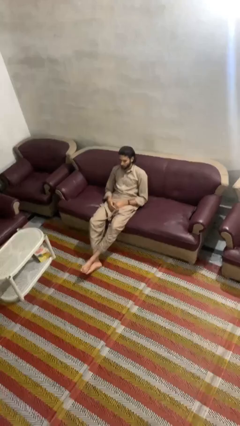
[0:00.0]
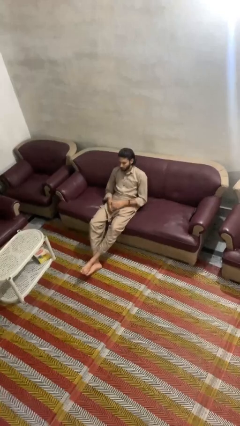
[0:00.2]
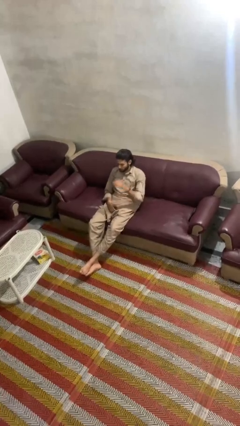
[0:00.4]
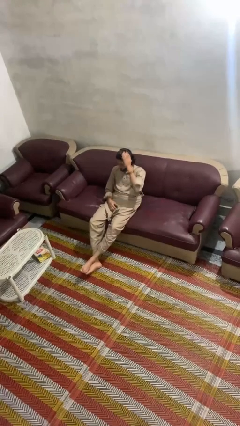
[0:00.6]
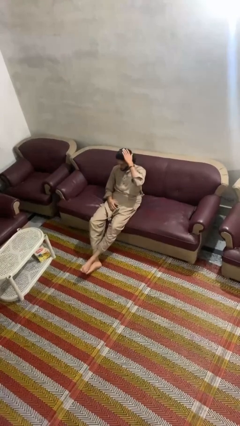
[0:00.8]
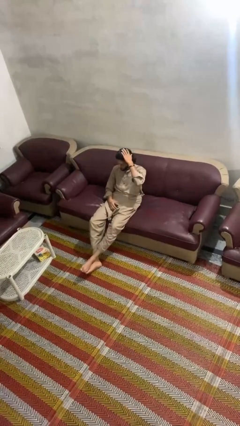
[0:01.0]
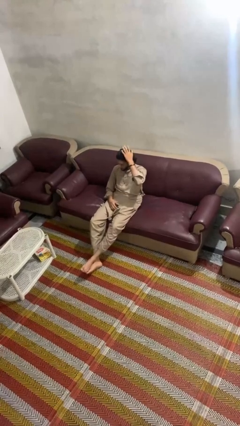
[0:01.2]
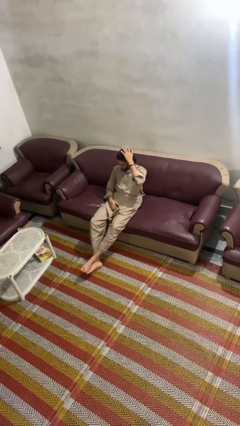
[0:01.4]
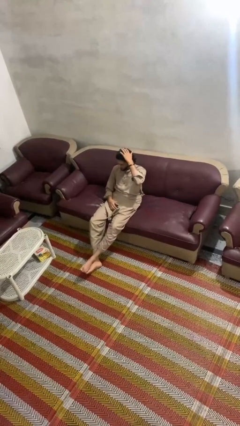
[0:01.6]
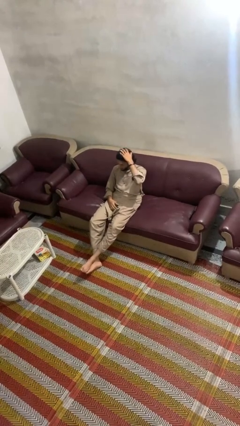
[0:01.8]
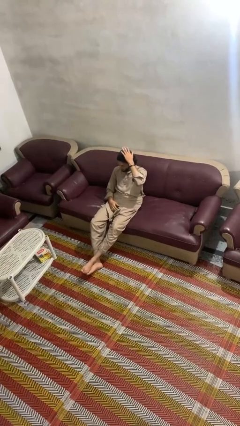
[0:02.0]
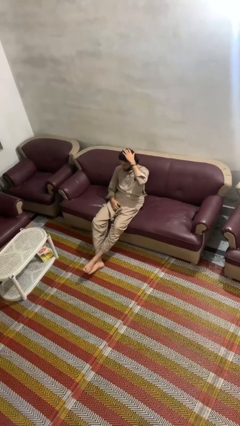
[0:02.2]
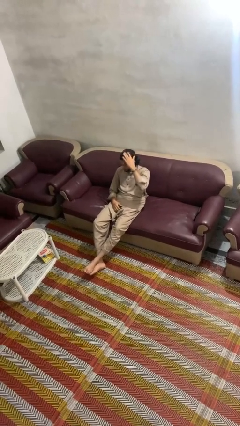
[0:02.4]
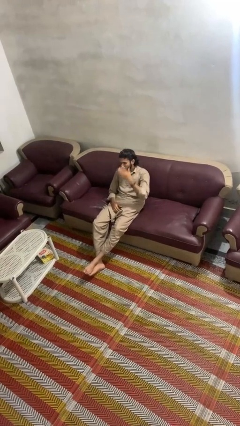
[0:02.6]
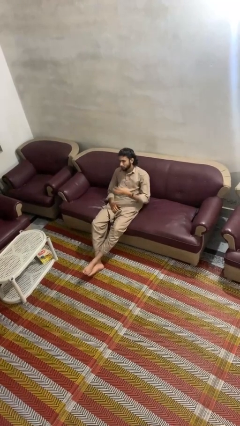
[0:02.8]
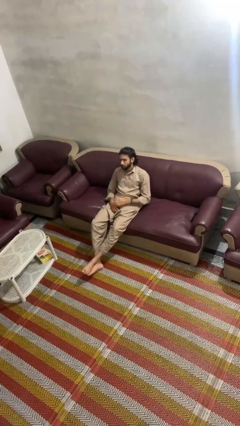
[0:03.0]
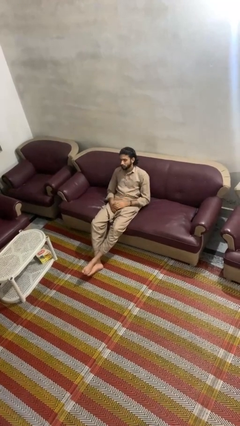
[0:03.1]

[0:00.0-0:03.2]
person pats head

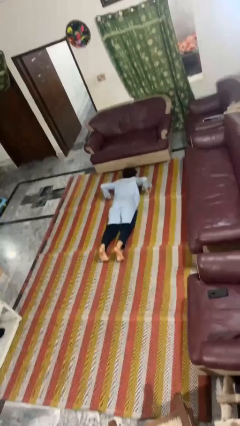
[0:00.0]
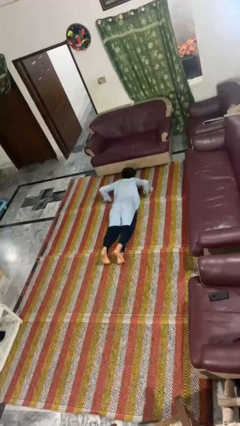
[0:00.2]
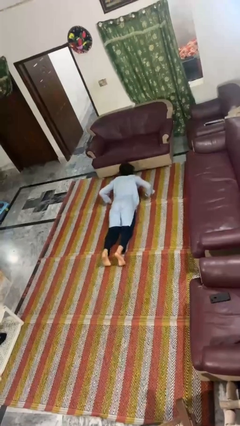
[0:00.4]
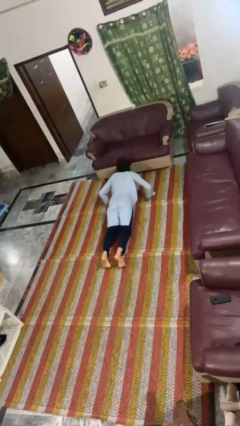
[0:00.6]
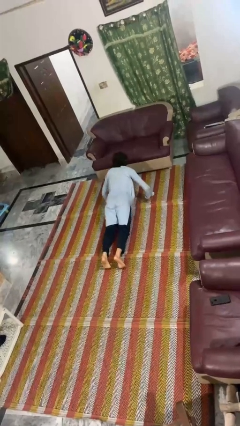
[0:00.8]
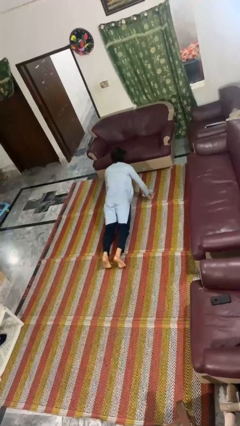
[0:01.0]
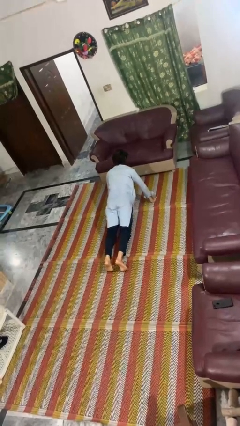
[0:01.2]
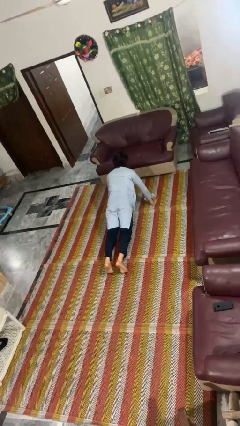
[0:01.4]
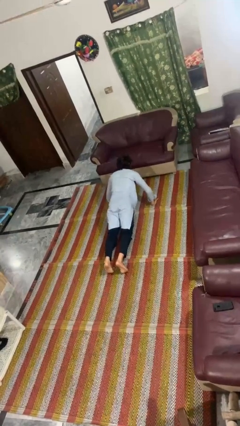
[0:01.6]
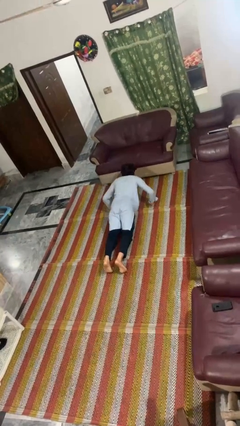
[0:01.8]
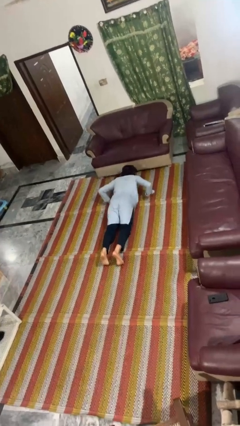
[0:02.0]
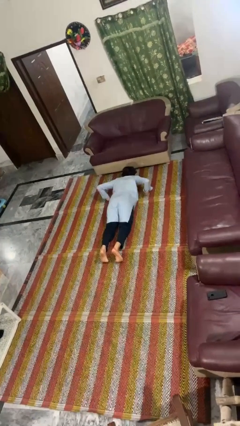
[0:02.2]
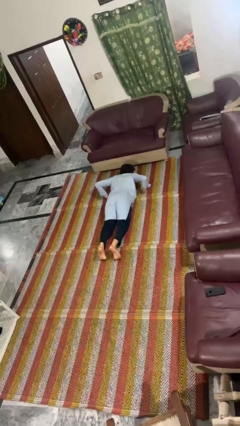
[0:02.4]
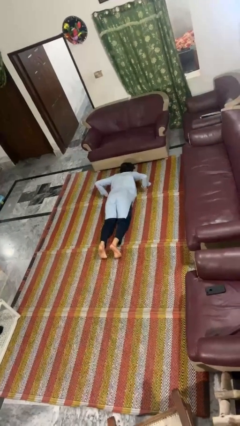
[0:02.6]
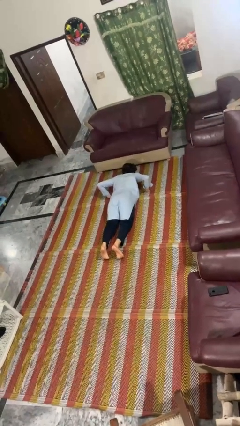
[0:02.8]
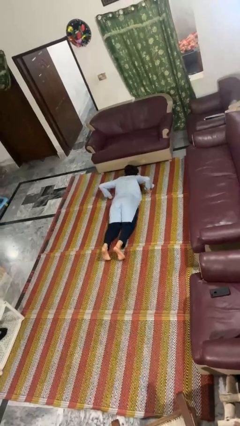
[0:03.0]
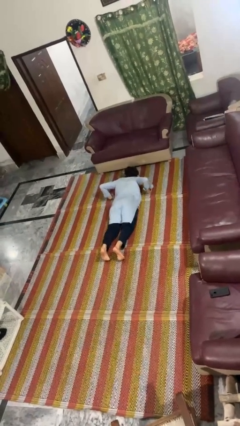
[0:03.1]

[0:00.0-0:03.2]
person exercises with pushup

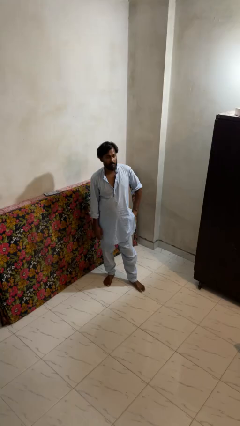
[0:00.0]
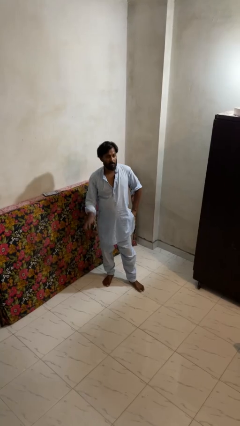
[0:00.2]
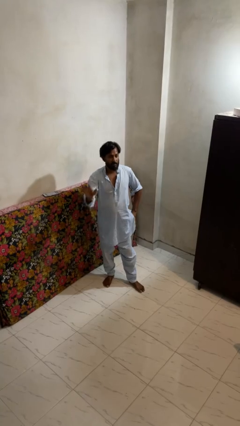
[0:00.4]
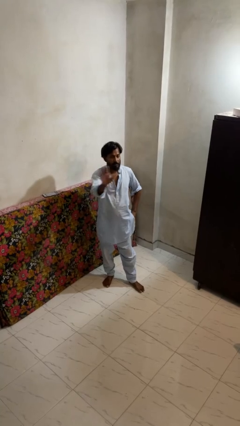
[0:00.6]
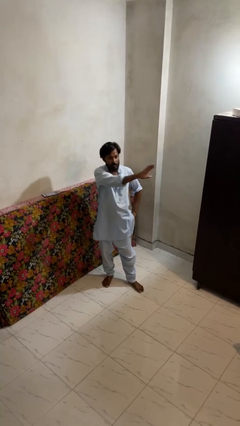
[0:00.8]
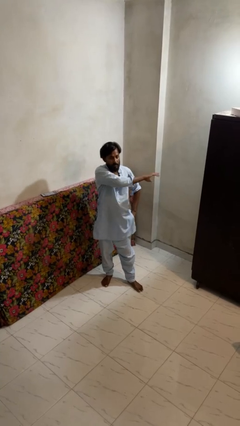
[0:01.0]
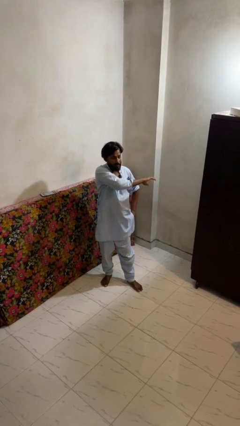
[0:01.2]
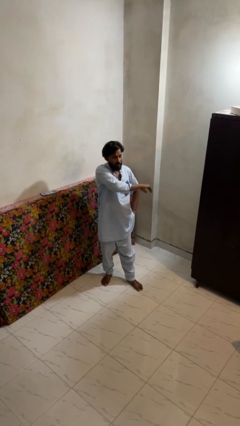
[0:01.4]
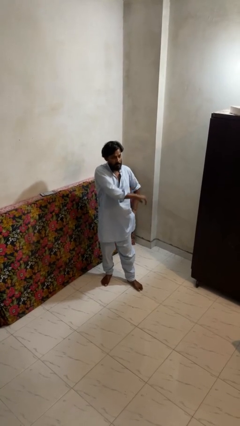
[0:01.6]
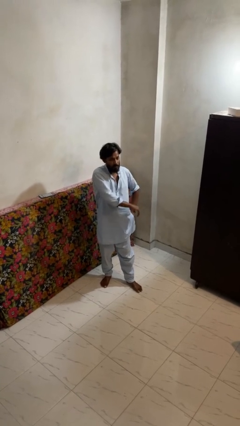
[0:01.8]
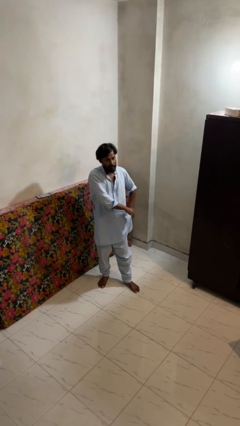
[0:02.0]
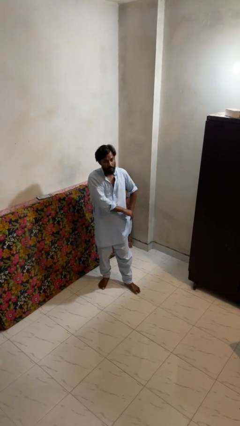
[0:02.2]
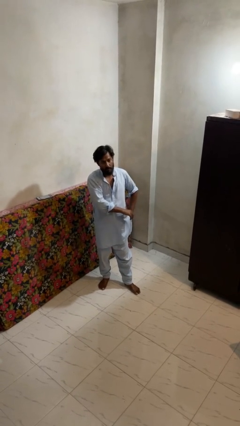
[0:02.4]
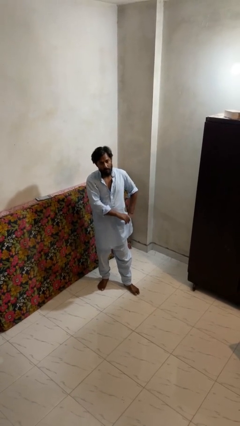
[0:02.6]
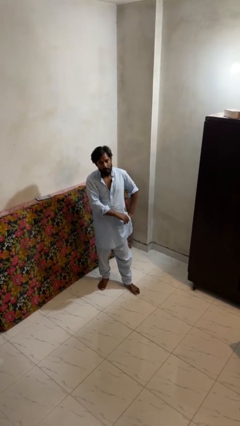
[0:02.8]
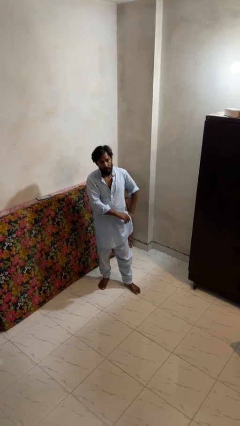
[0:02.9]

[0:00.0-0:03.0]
person gestures swipe left

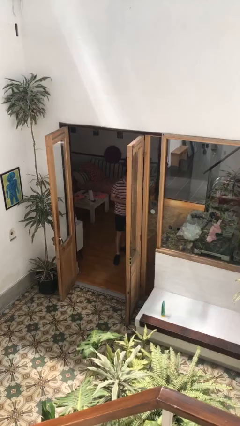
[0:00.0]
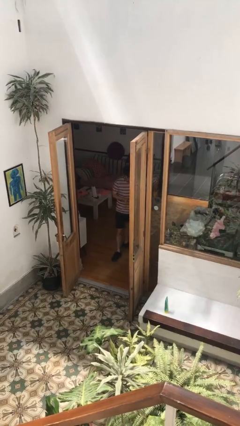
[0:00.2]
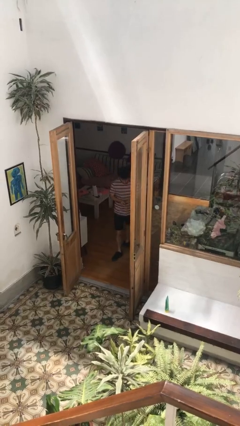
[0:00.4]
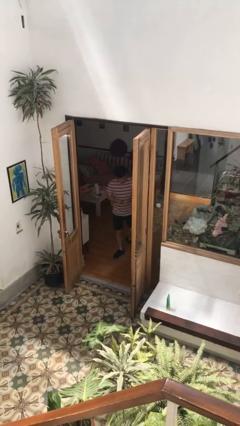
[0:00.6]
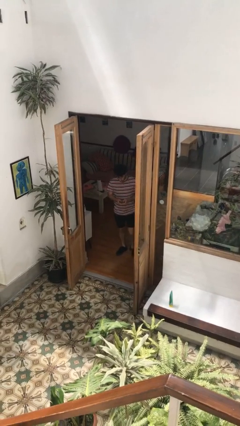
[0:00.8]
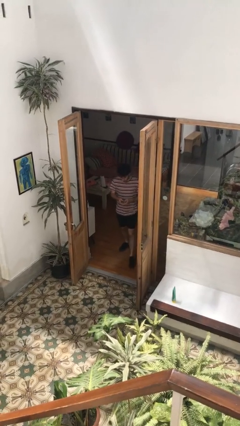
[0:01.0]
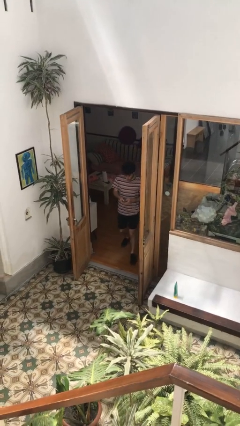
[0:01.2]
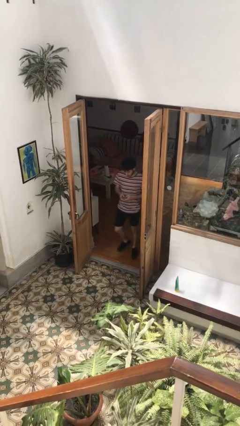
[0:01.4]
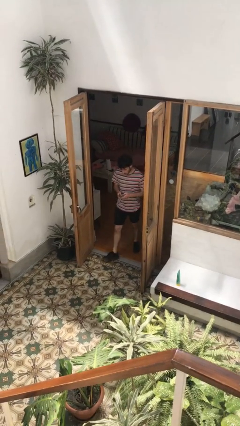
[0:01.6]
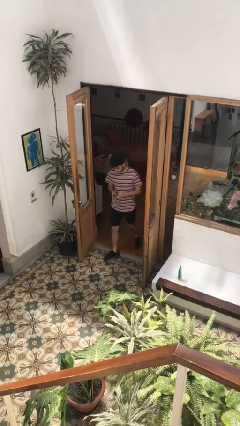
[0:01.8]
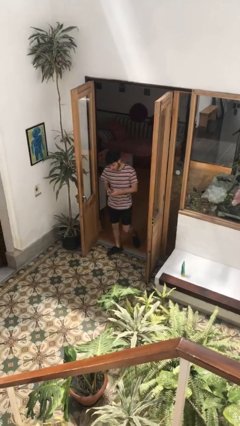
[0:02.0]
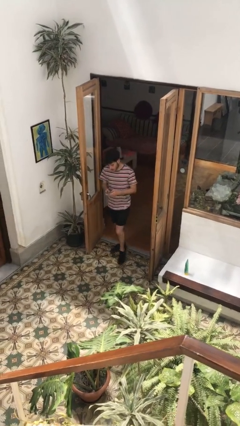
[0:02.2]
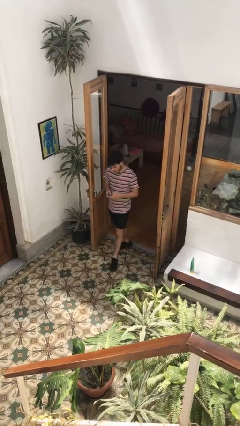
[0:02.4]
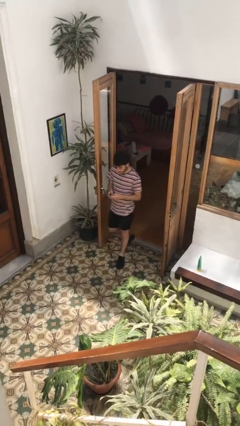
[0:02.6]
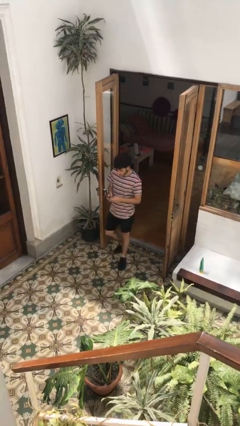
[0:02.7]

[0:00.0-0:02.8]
person enters scene through structure

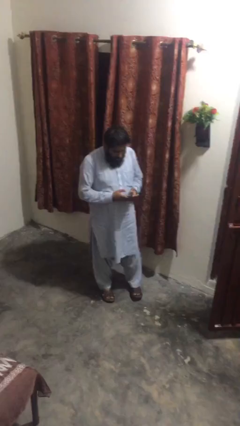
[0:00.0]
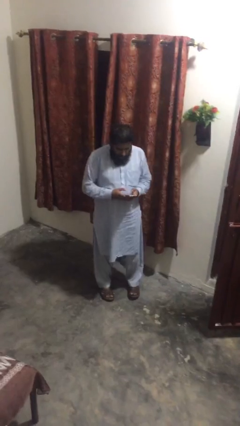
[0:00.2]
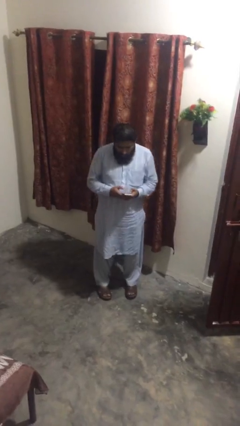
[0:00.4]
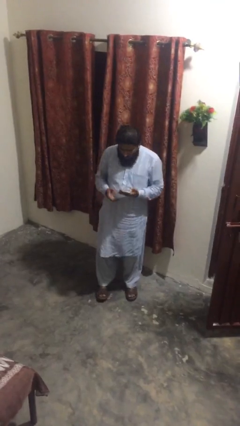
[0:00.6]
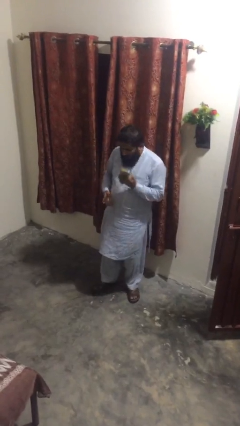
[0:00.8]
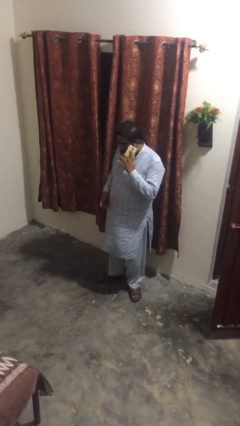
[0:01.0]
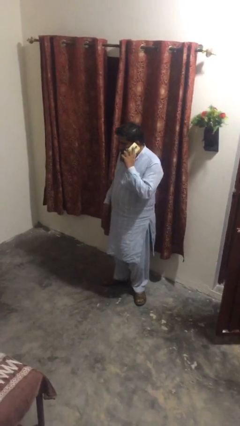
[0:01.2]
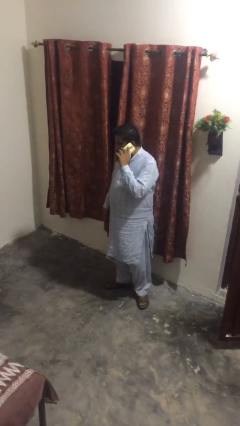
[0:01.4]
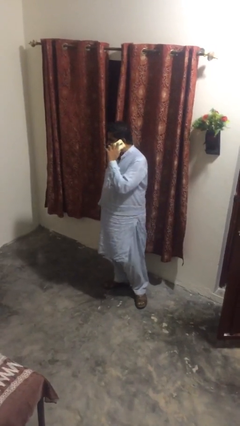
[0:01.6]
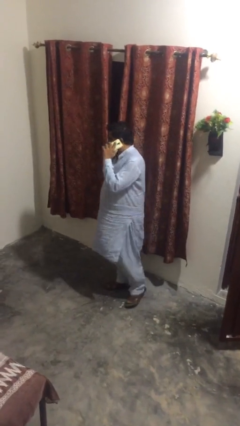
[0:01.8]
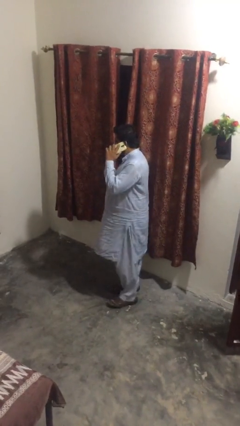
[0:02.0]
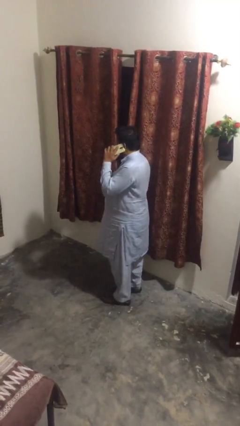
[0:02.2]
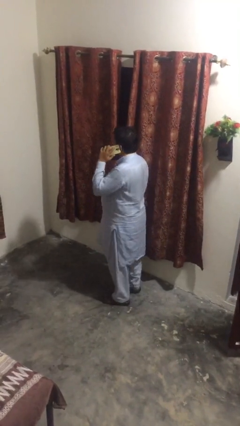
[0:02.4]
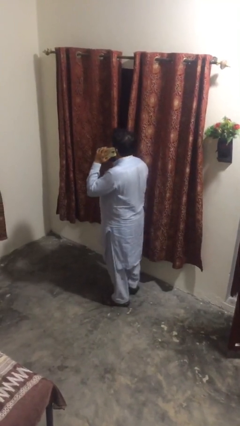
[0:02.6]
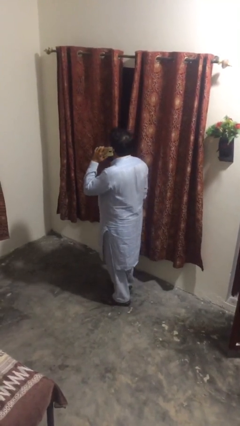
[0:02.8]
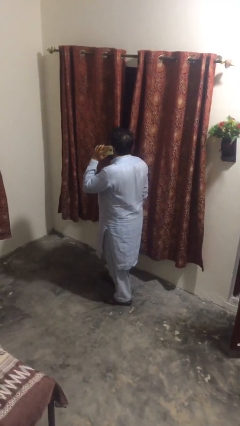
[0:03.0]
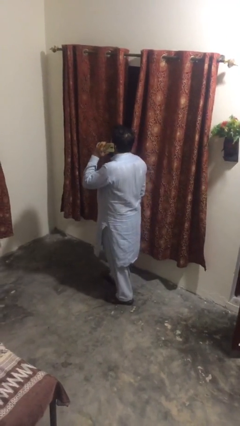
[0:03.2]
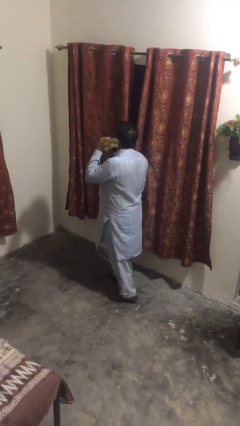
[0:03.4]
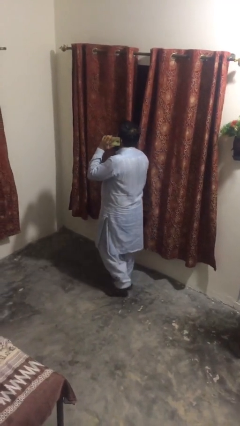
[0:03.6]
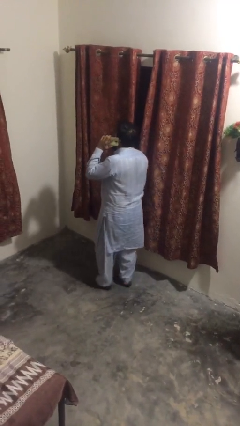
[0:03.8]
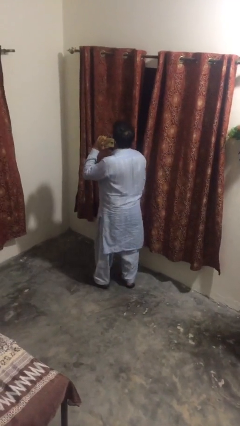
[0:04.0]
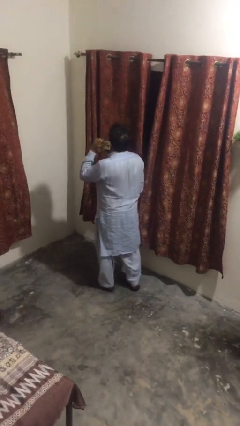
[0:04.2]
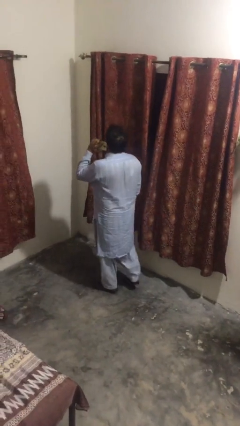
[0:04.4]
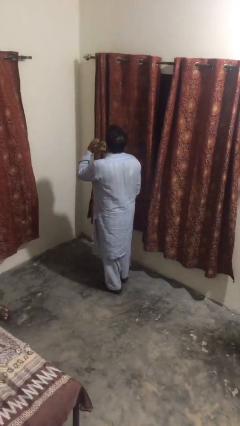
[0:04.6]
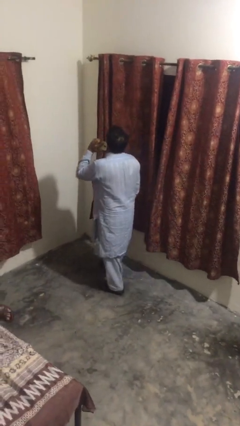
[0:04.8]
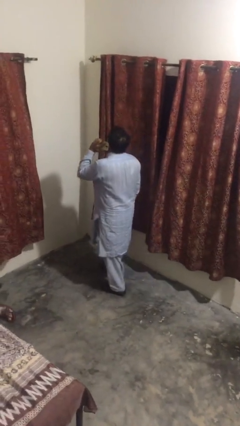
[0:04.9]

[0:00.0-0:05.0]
person talks on phone

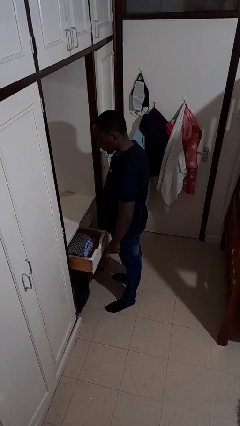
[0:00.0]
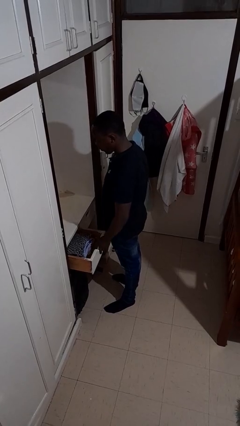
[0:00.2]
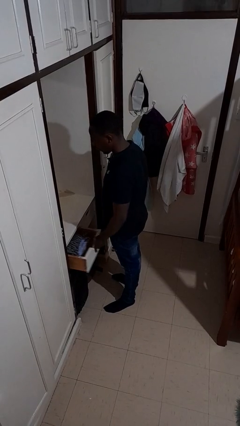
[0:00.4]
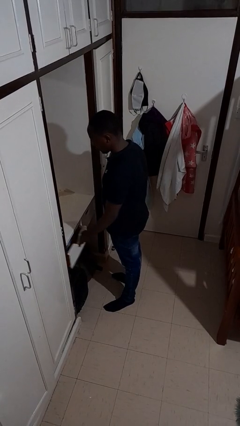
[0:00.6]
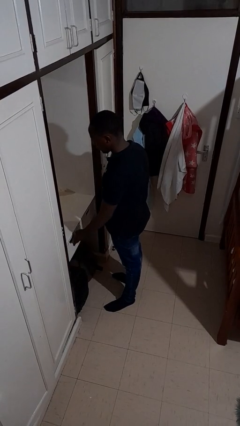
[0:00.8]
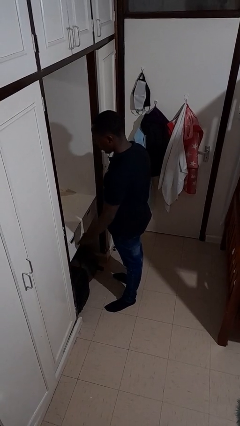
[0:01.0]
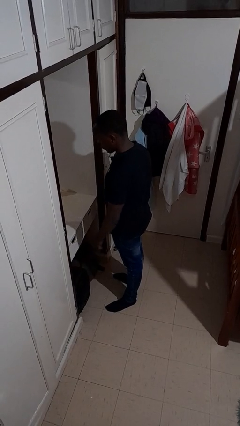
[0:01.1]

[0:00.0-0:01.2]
person closes dresser drawer
